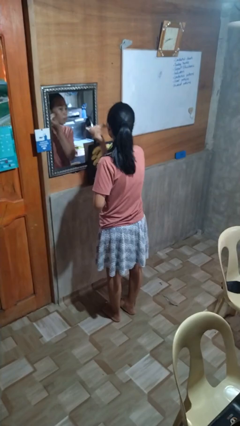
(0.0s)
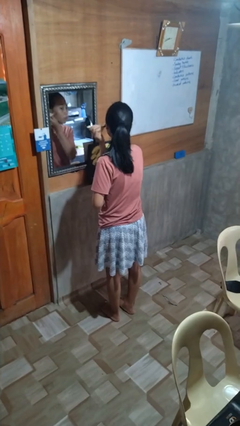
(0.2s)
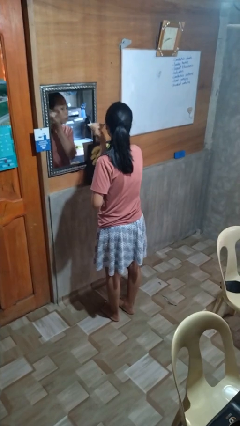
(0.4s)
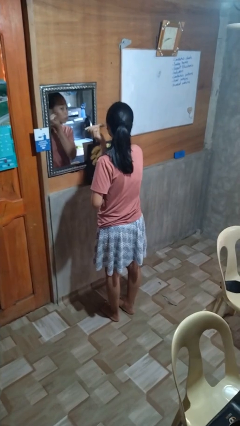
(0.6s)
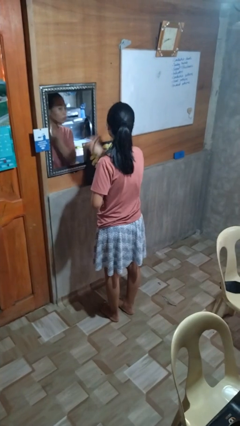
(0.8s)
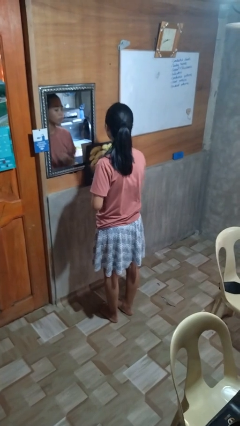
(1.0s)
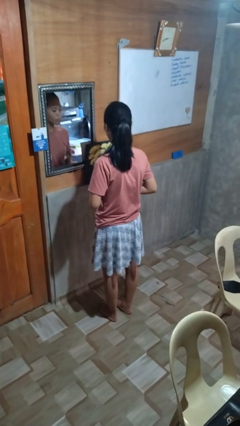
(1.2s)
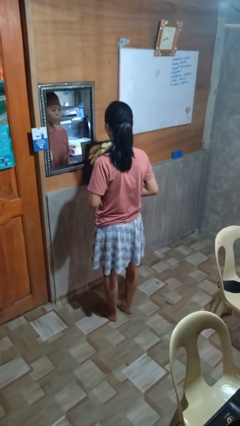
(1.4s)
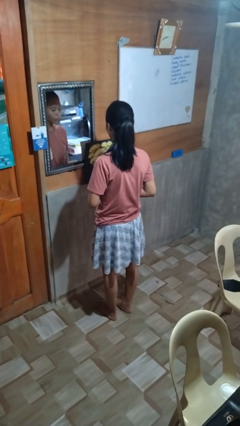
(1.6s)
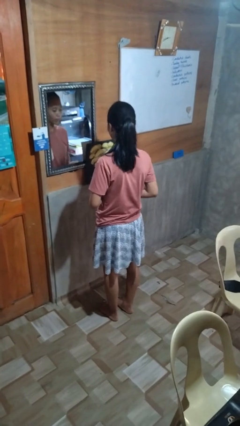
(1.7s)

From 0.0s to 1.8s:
person applies foundation makeup

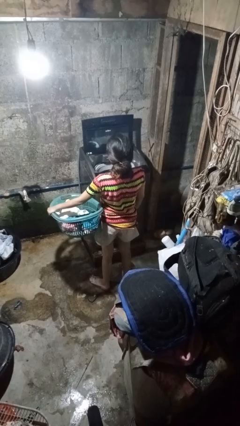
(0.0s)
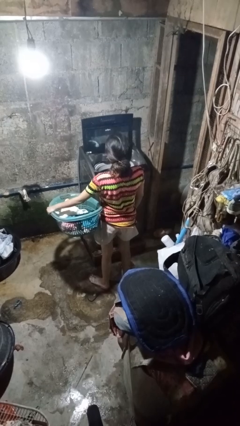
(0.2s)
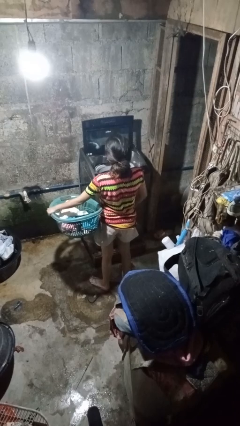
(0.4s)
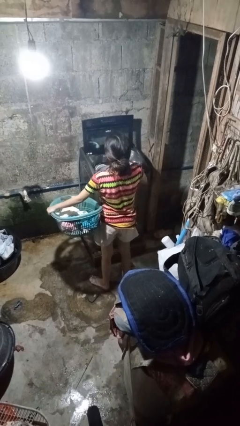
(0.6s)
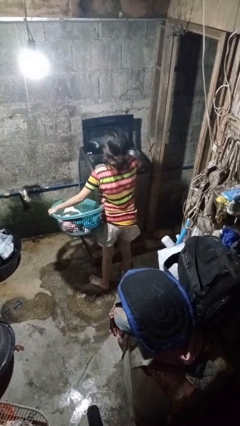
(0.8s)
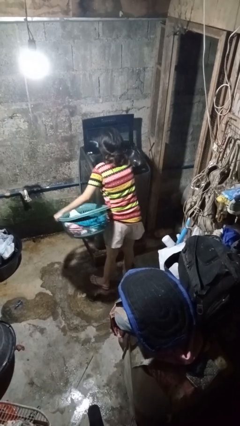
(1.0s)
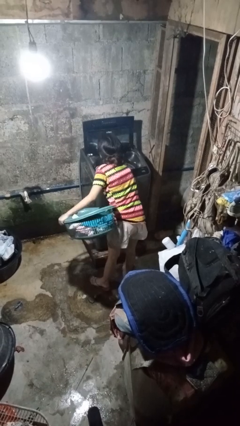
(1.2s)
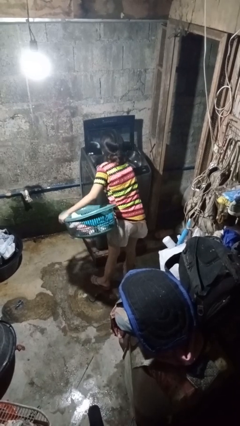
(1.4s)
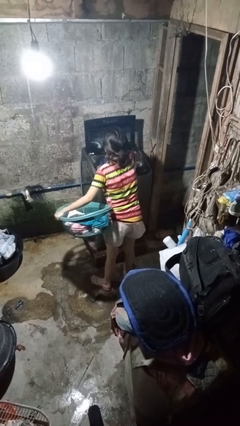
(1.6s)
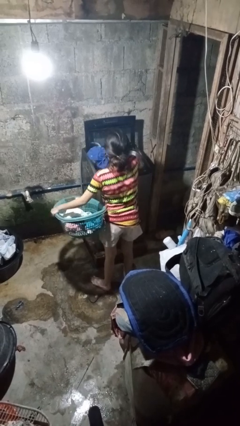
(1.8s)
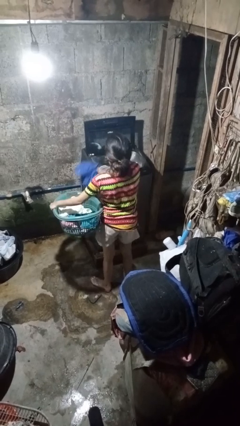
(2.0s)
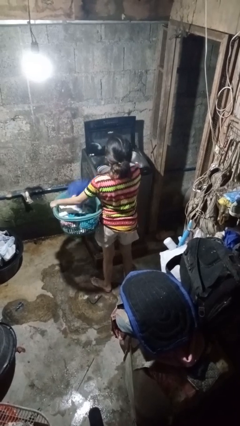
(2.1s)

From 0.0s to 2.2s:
person unloads clotheswasher

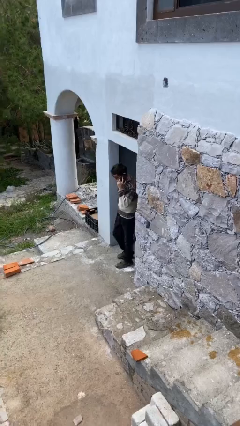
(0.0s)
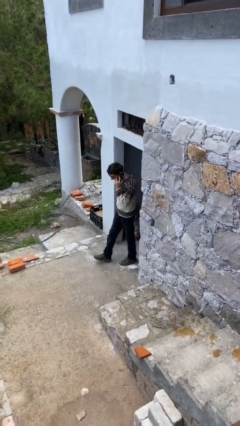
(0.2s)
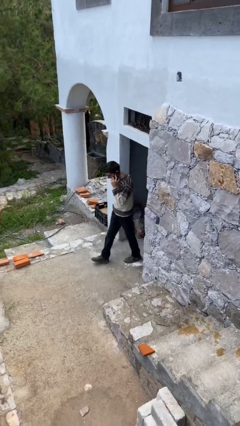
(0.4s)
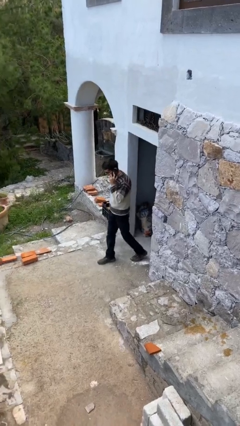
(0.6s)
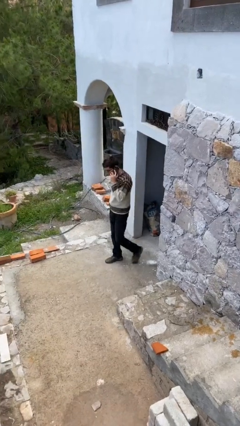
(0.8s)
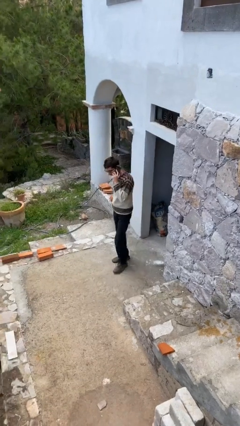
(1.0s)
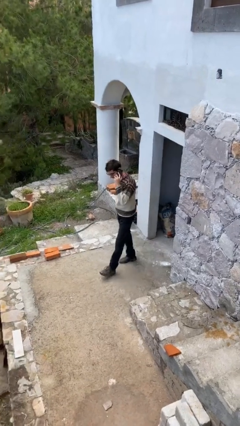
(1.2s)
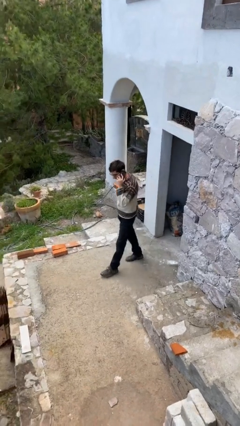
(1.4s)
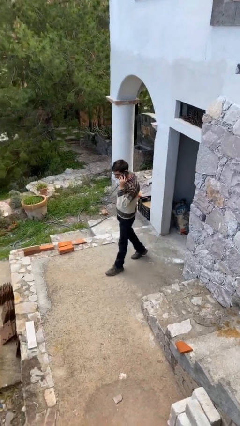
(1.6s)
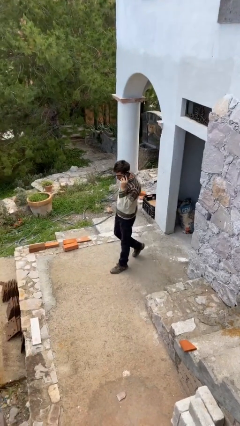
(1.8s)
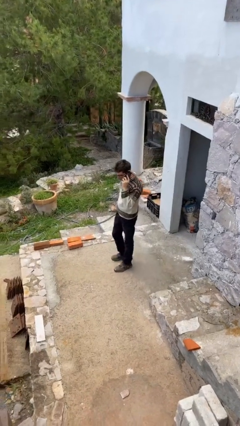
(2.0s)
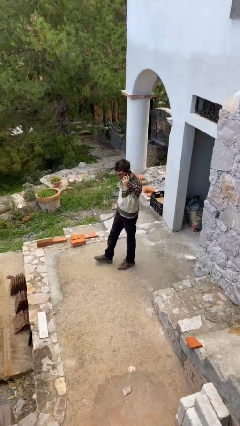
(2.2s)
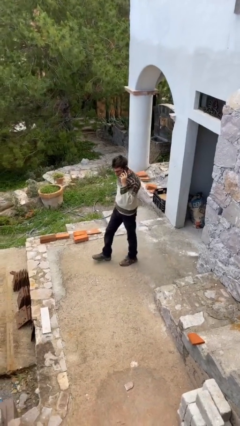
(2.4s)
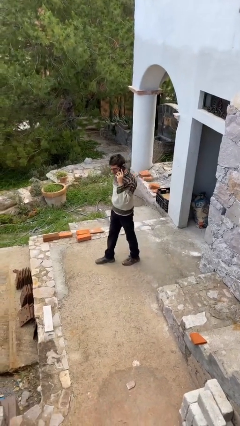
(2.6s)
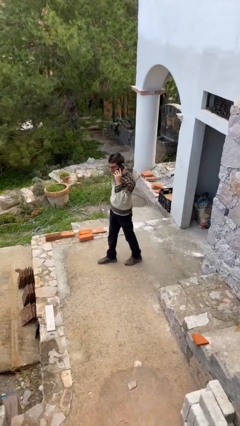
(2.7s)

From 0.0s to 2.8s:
person enters scene through structure

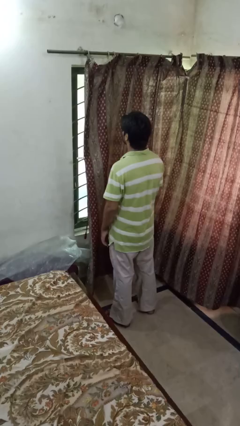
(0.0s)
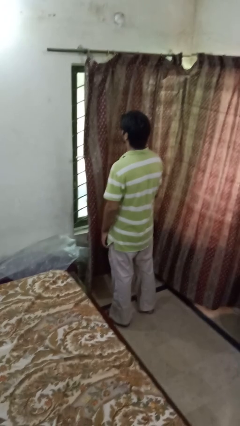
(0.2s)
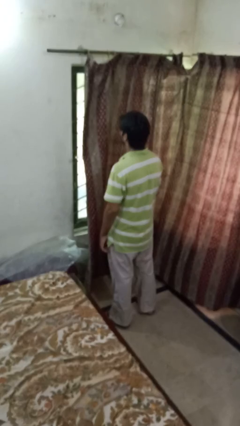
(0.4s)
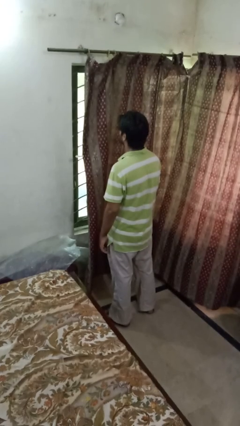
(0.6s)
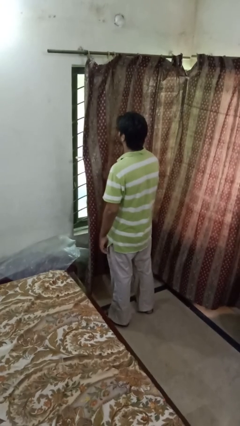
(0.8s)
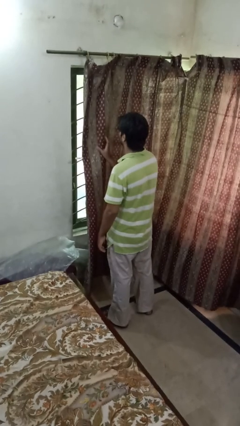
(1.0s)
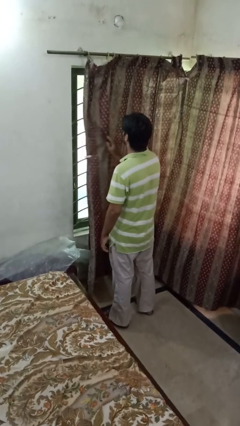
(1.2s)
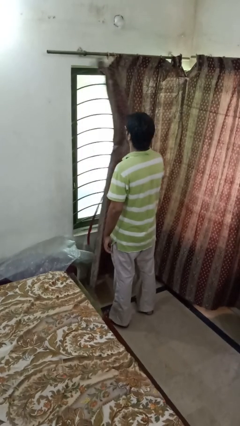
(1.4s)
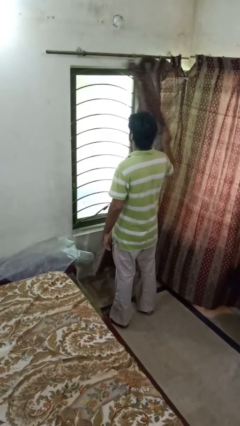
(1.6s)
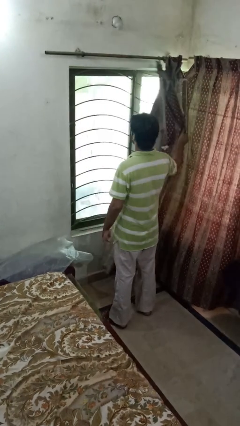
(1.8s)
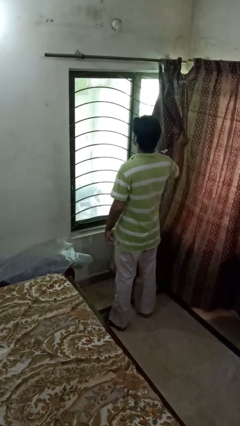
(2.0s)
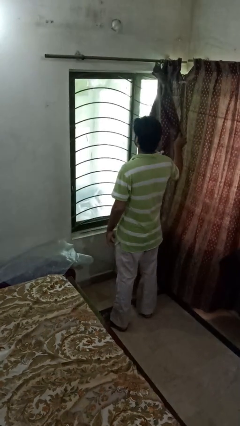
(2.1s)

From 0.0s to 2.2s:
person opens curtains

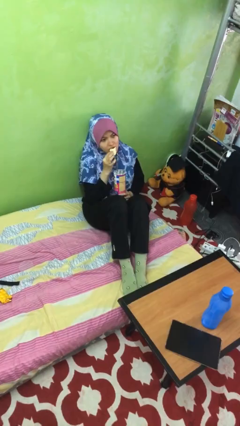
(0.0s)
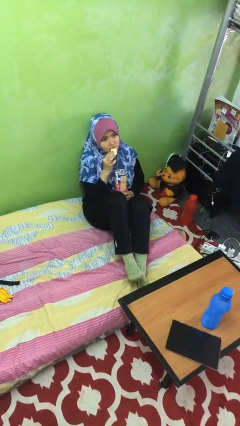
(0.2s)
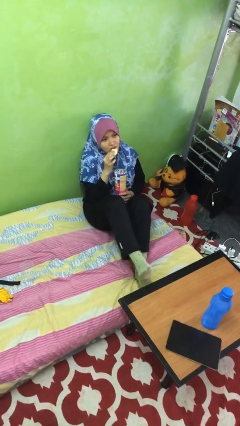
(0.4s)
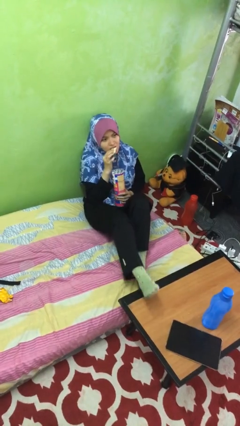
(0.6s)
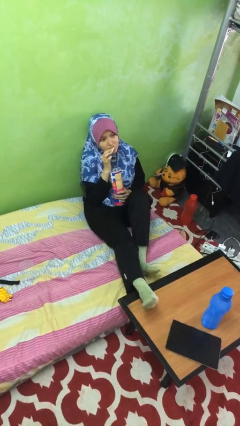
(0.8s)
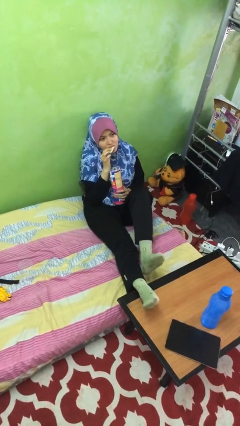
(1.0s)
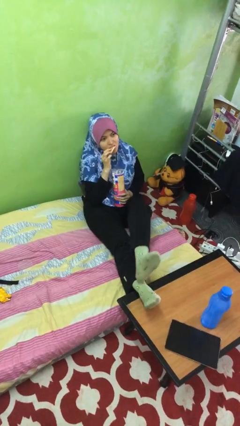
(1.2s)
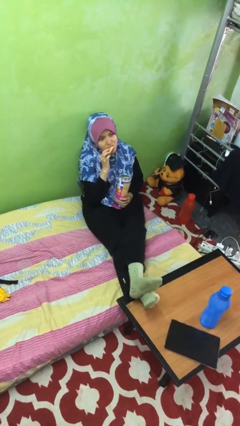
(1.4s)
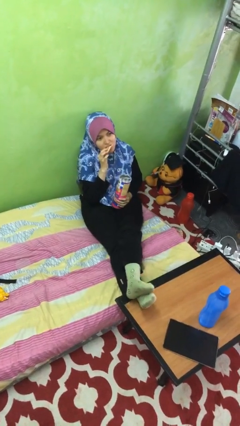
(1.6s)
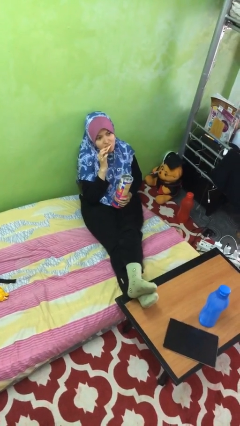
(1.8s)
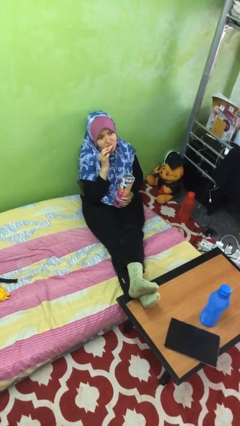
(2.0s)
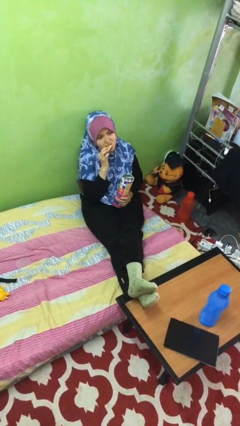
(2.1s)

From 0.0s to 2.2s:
person puts feet up

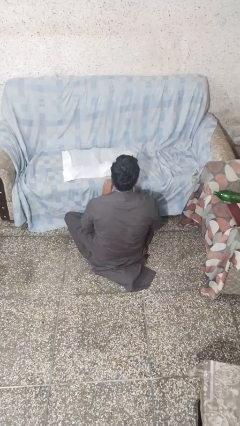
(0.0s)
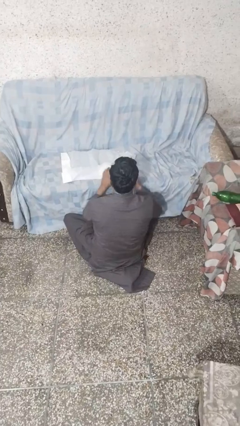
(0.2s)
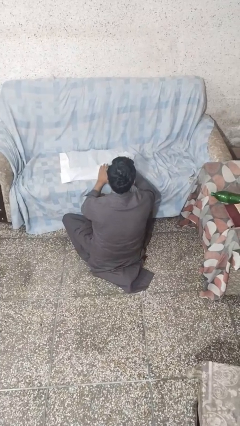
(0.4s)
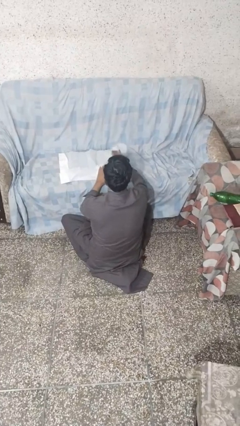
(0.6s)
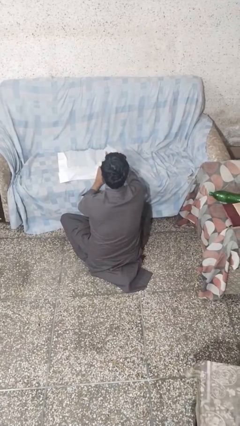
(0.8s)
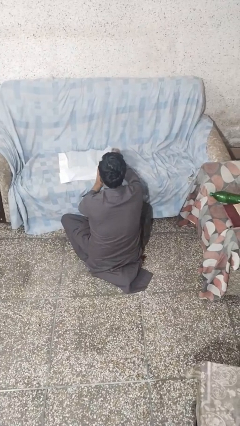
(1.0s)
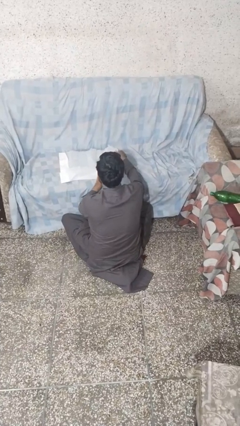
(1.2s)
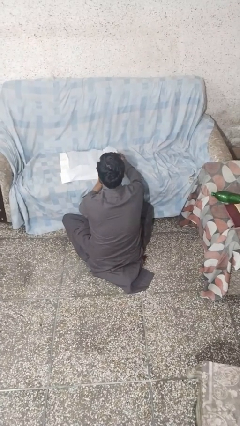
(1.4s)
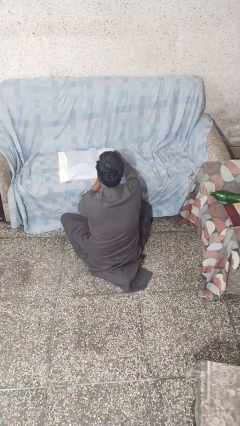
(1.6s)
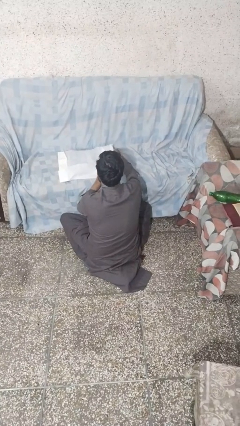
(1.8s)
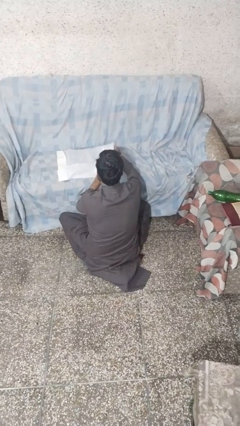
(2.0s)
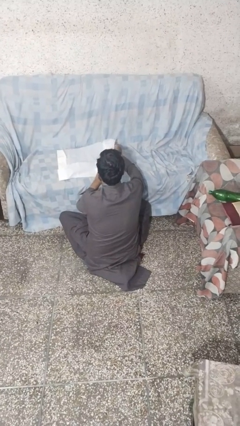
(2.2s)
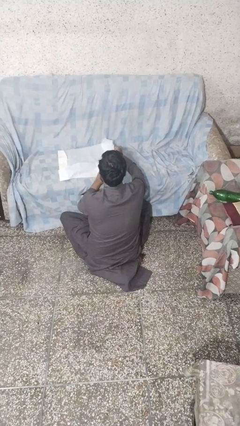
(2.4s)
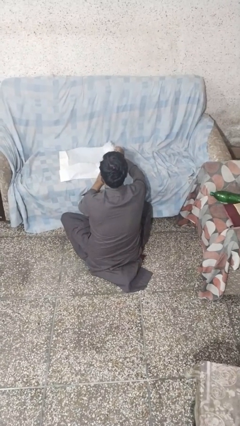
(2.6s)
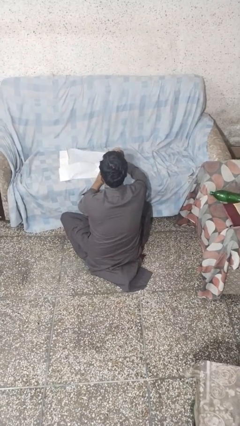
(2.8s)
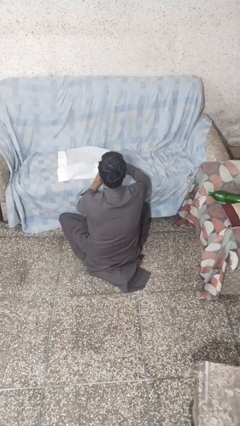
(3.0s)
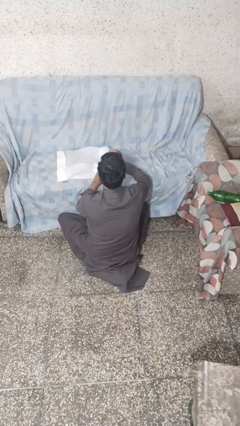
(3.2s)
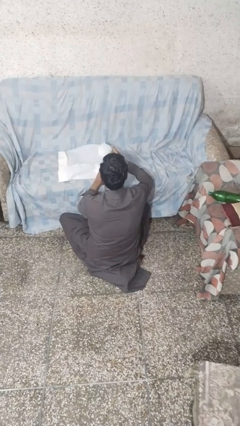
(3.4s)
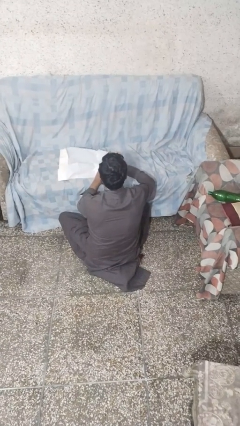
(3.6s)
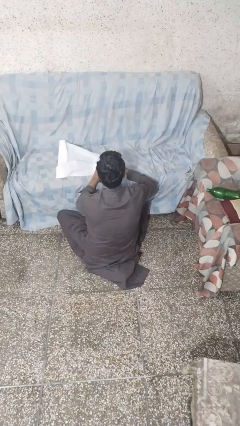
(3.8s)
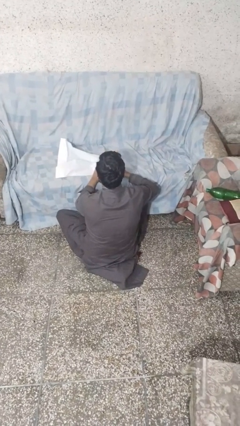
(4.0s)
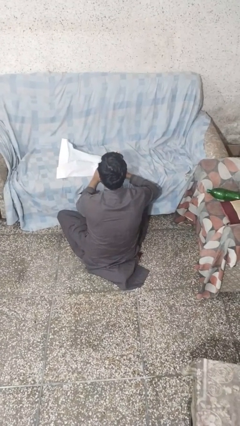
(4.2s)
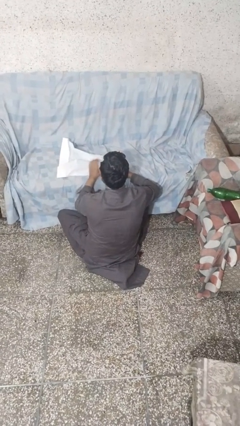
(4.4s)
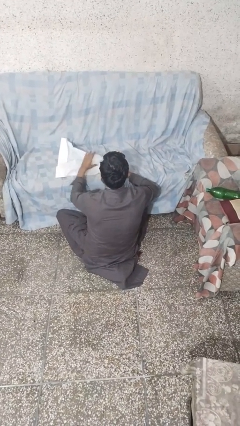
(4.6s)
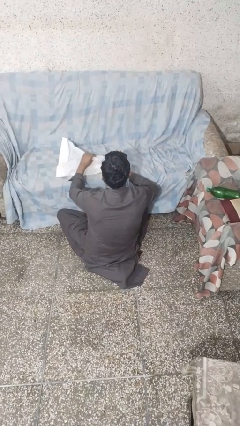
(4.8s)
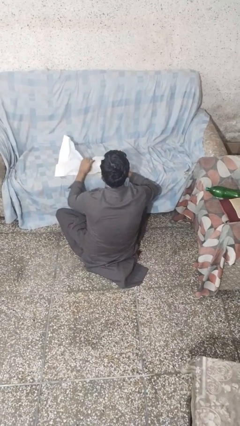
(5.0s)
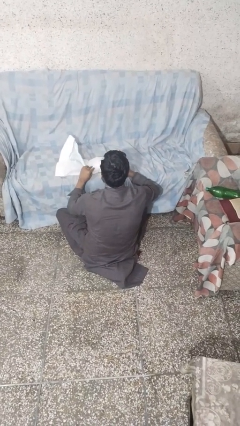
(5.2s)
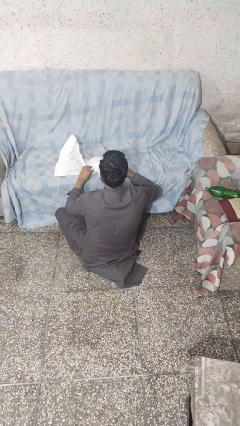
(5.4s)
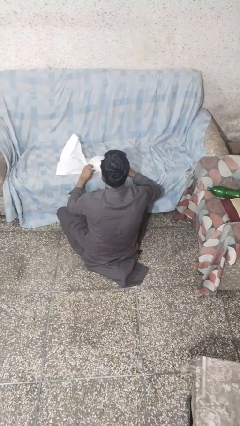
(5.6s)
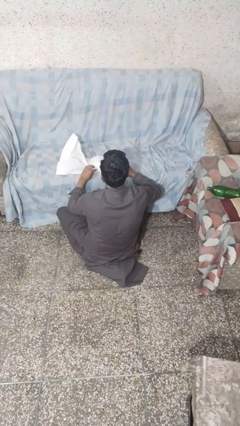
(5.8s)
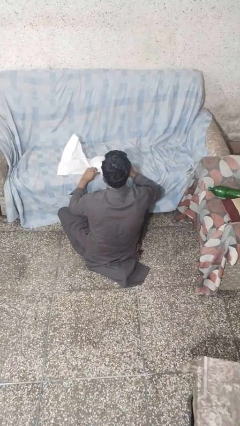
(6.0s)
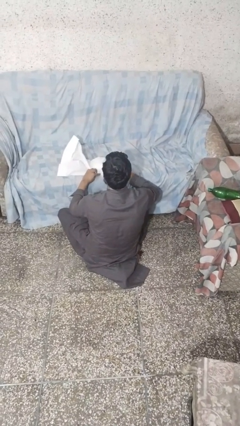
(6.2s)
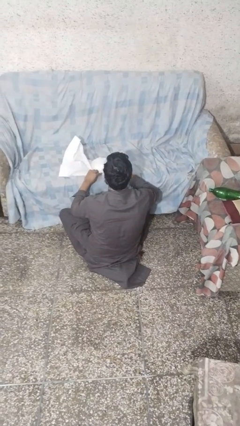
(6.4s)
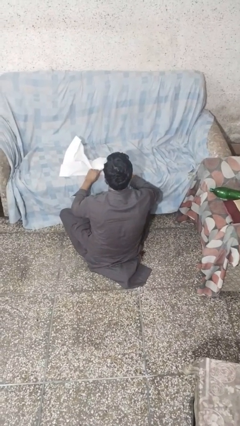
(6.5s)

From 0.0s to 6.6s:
person wraps box
